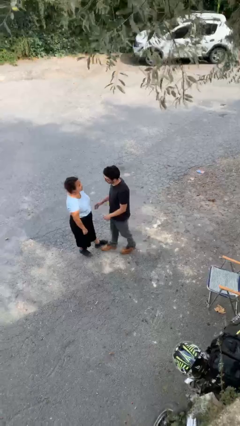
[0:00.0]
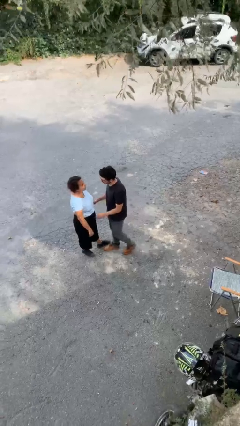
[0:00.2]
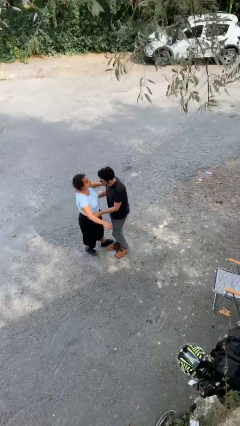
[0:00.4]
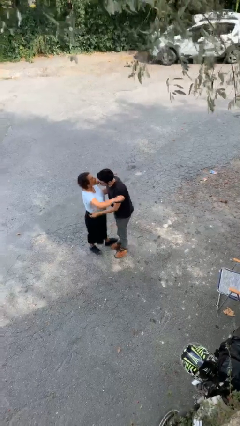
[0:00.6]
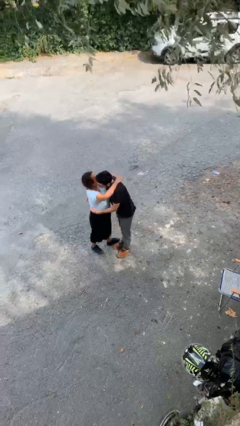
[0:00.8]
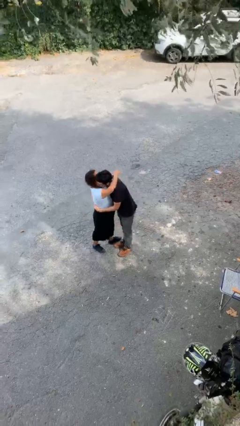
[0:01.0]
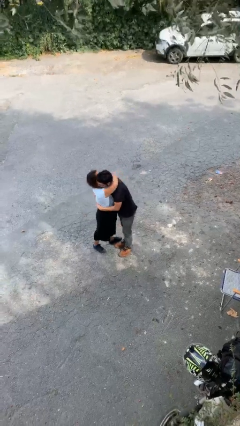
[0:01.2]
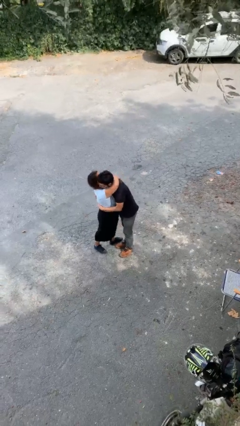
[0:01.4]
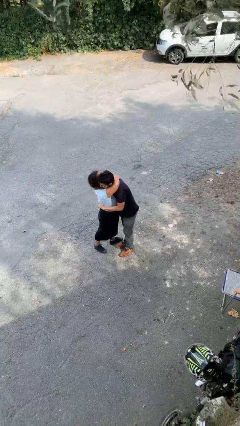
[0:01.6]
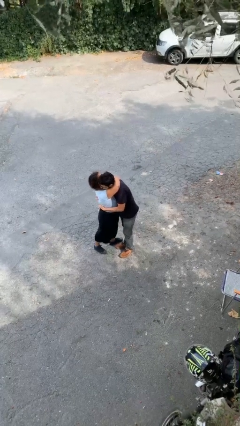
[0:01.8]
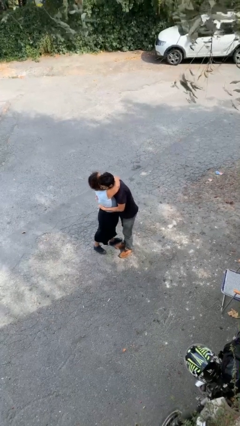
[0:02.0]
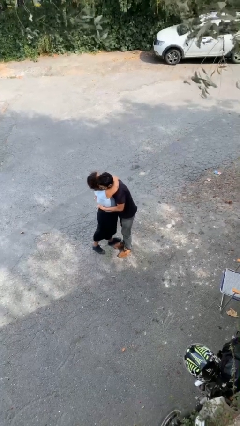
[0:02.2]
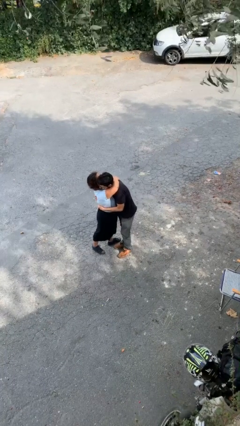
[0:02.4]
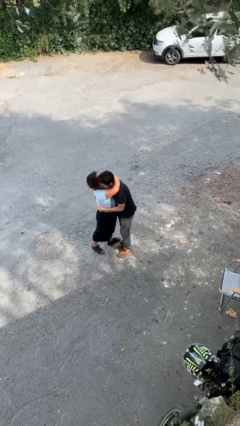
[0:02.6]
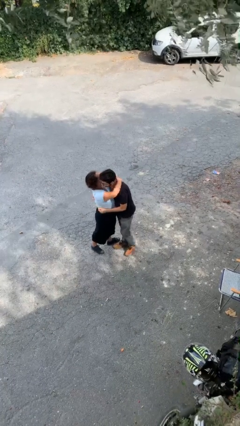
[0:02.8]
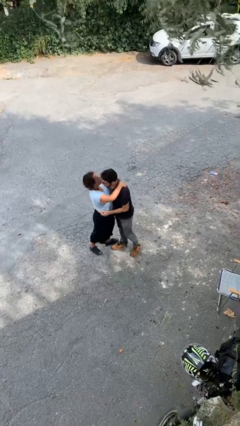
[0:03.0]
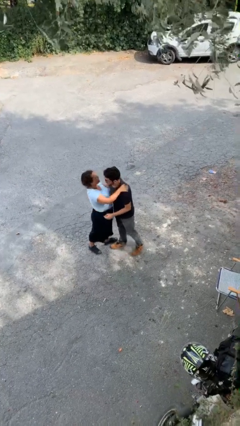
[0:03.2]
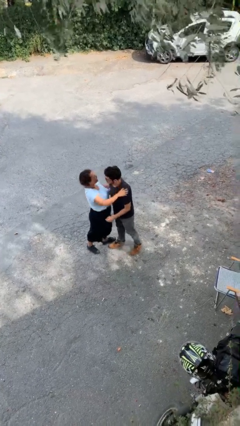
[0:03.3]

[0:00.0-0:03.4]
person embraces person

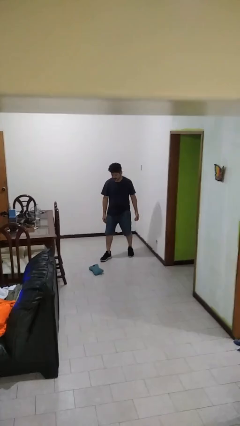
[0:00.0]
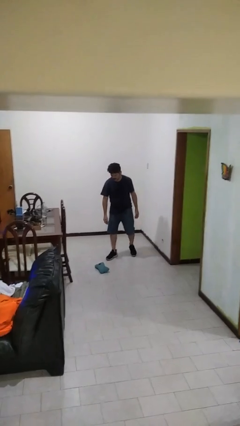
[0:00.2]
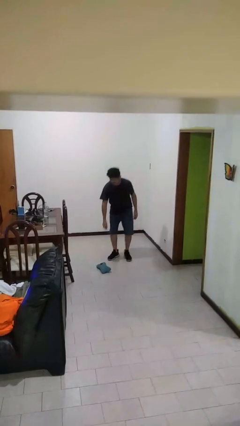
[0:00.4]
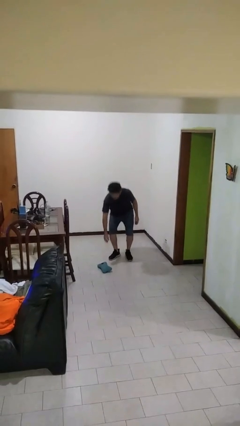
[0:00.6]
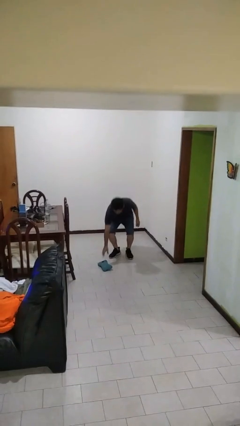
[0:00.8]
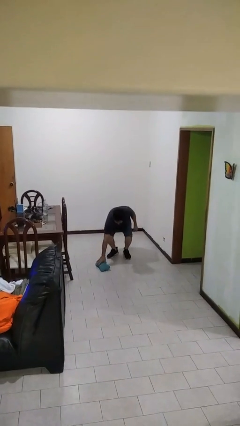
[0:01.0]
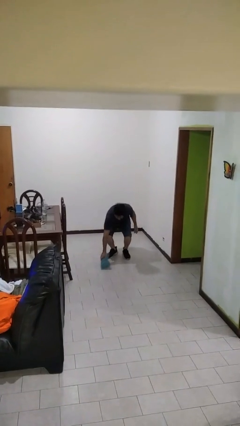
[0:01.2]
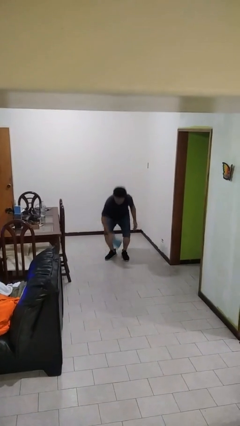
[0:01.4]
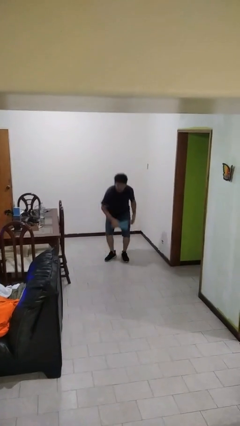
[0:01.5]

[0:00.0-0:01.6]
person picks up object from floor

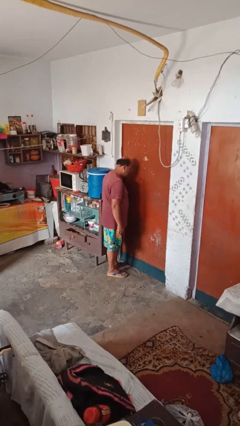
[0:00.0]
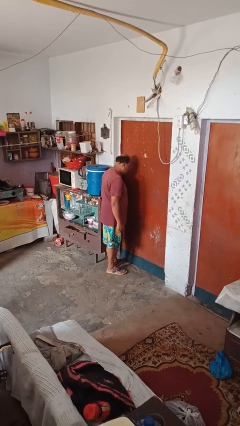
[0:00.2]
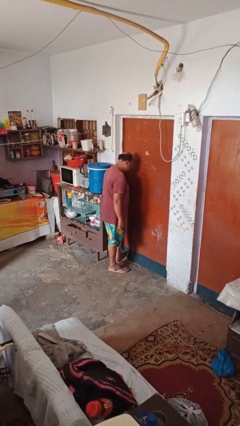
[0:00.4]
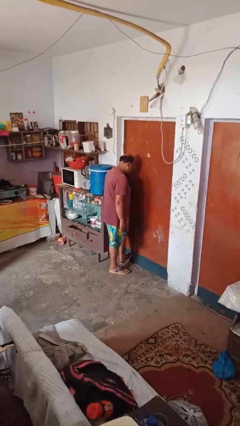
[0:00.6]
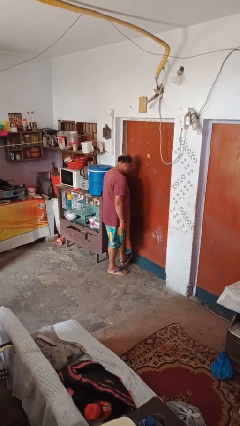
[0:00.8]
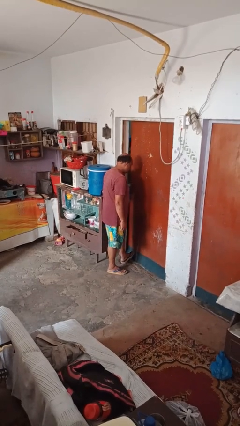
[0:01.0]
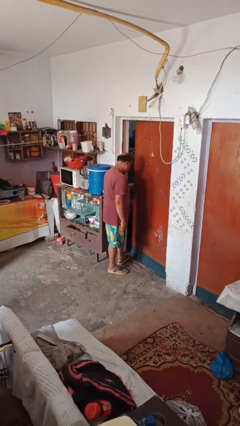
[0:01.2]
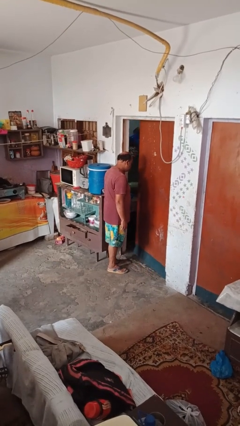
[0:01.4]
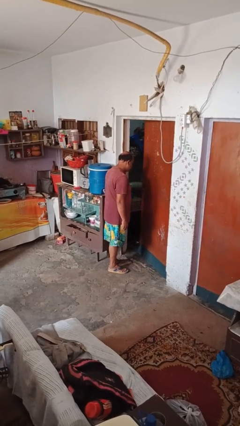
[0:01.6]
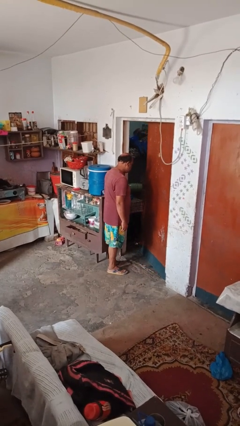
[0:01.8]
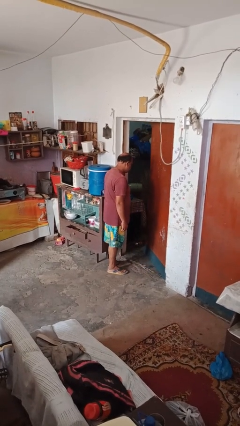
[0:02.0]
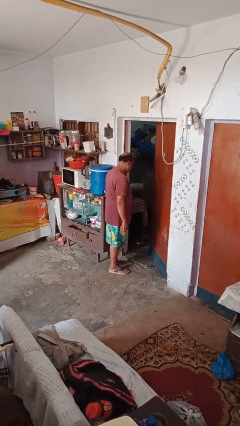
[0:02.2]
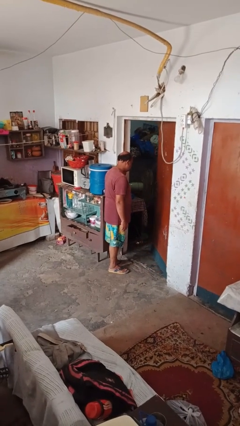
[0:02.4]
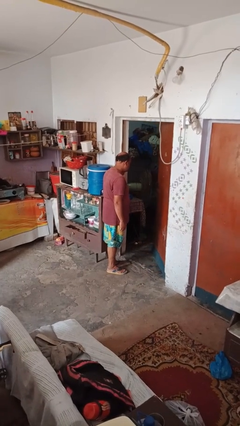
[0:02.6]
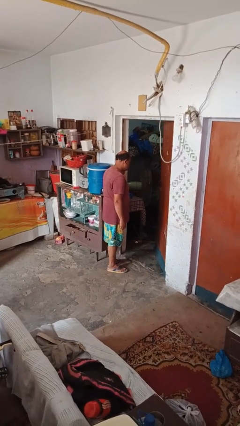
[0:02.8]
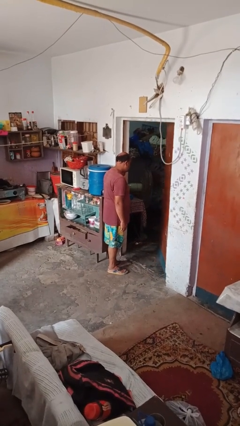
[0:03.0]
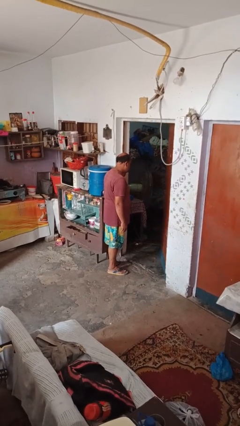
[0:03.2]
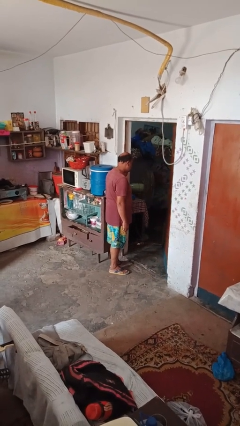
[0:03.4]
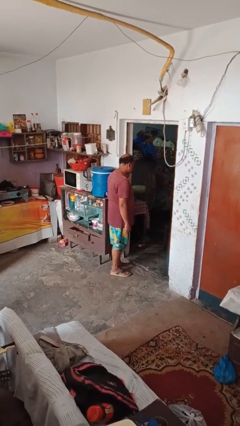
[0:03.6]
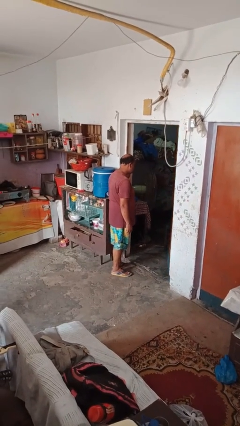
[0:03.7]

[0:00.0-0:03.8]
person opens facility door

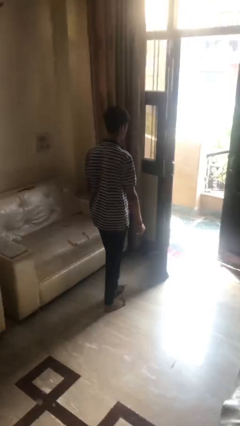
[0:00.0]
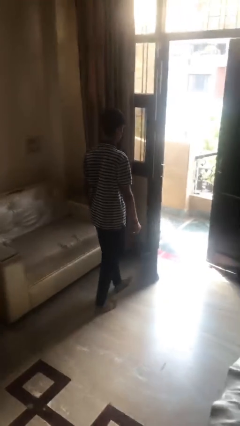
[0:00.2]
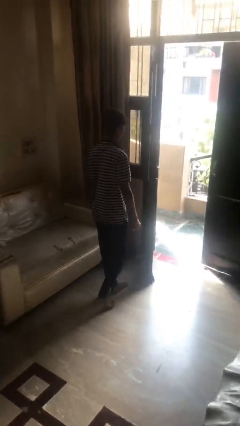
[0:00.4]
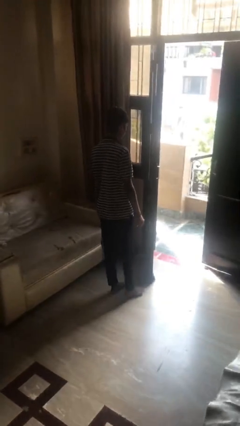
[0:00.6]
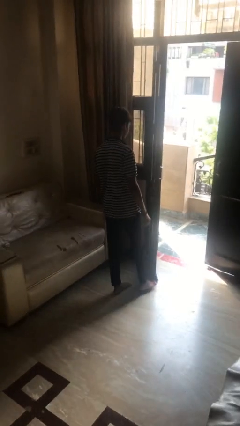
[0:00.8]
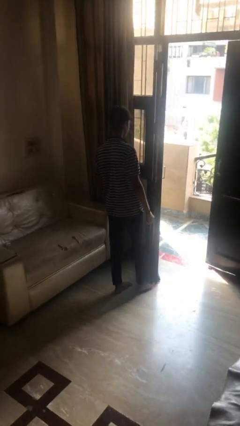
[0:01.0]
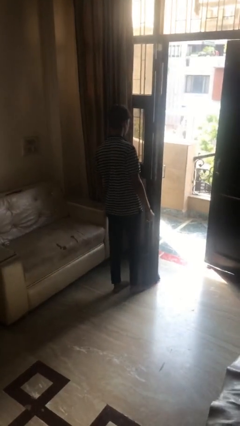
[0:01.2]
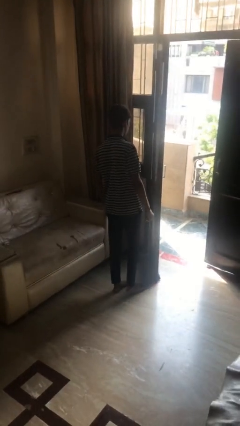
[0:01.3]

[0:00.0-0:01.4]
person stubs toe

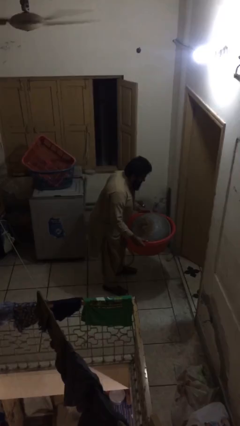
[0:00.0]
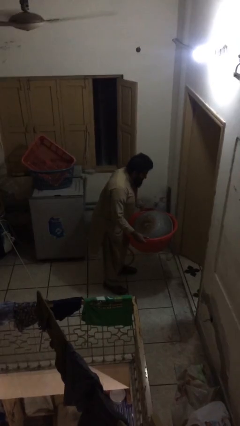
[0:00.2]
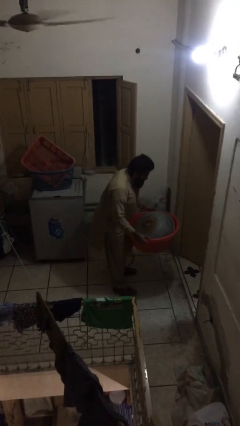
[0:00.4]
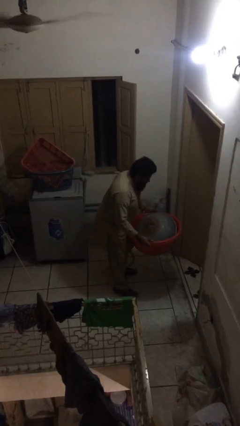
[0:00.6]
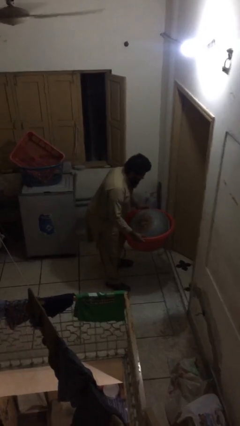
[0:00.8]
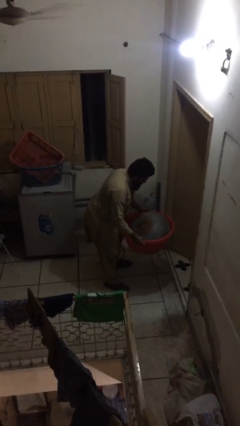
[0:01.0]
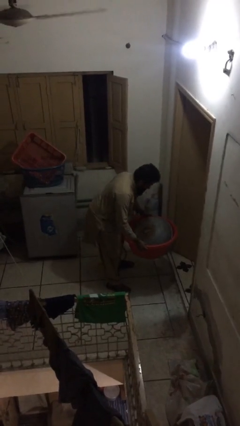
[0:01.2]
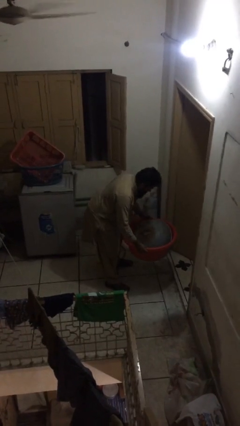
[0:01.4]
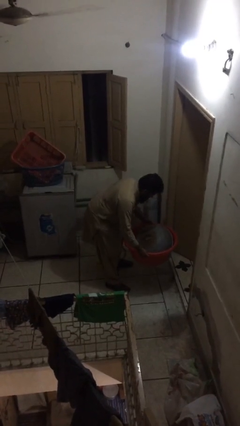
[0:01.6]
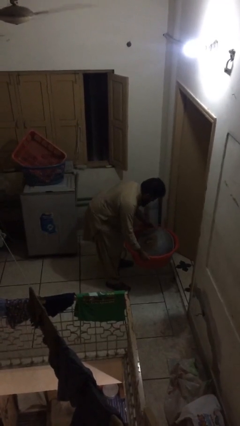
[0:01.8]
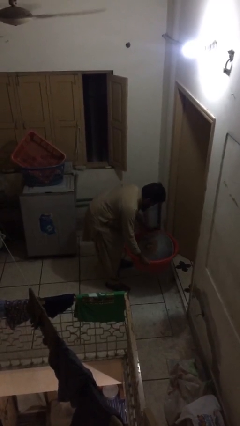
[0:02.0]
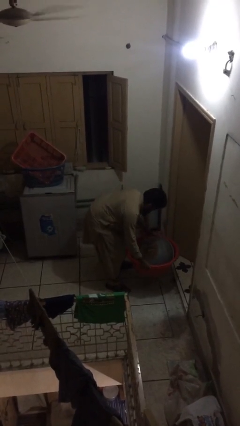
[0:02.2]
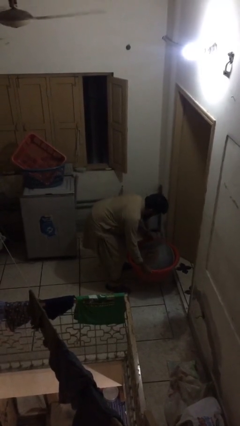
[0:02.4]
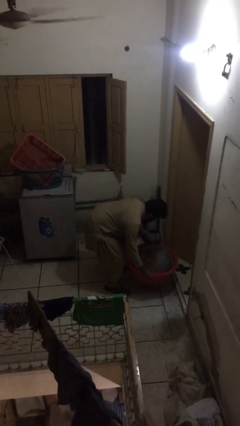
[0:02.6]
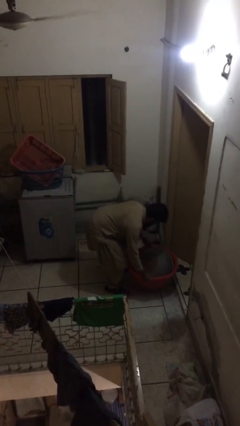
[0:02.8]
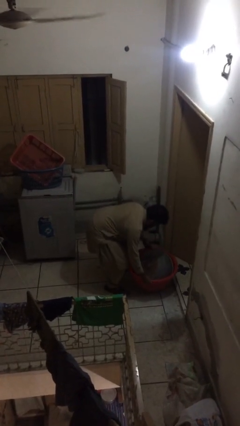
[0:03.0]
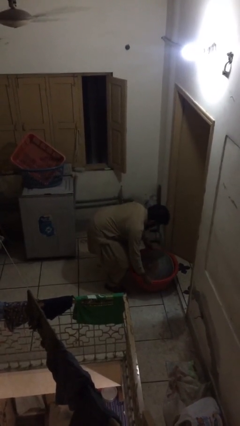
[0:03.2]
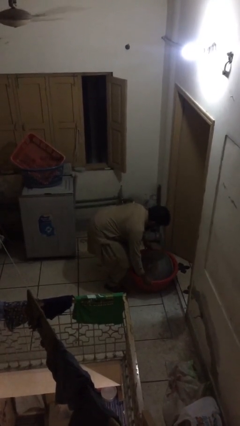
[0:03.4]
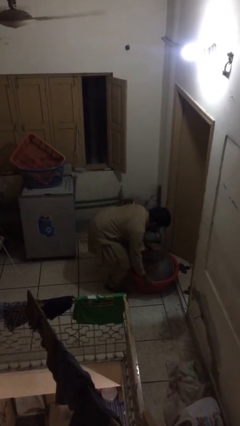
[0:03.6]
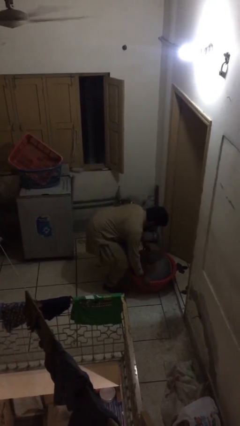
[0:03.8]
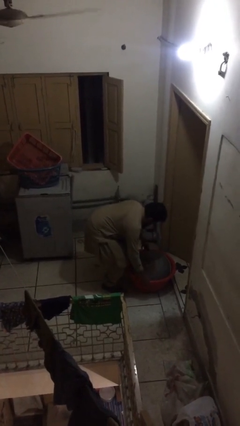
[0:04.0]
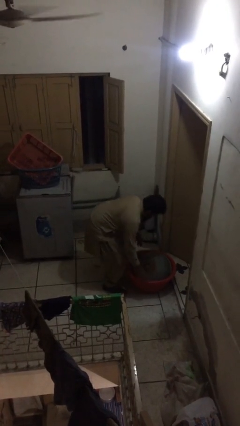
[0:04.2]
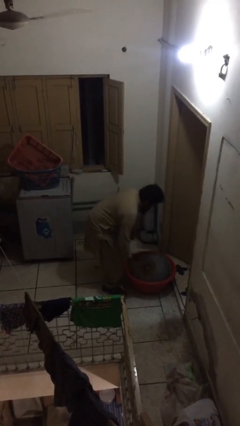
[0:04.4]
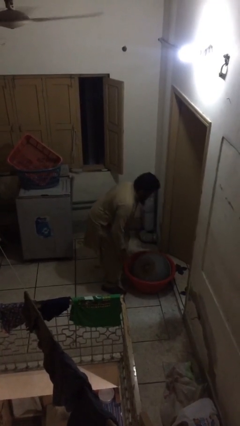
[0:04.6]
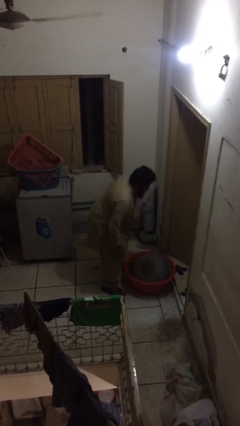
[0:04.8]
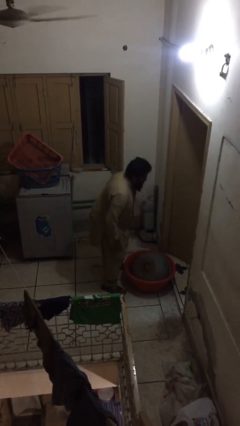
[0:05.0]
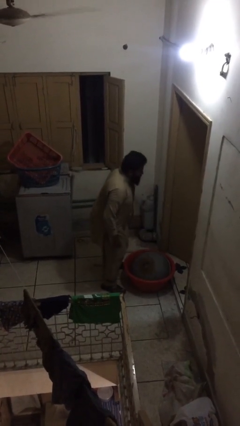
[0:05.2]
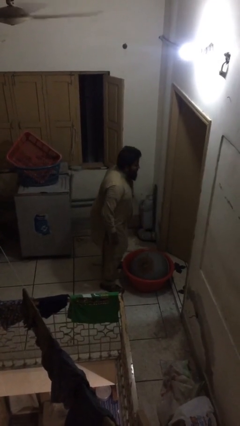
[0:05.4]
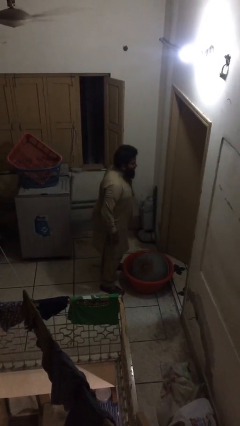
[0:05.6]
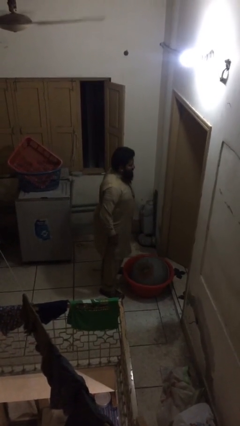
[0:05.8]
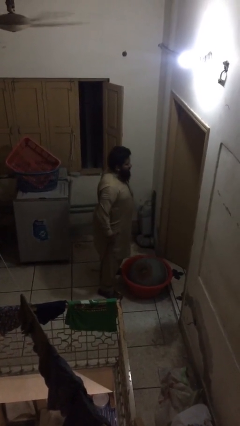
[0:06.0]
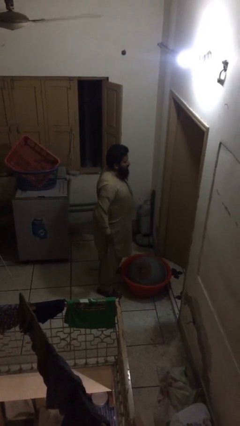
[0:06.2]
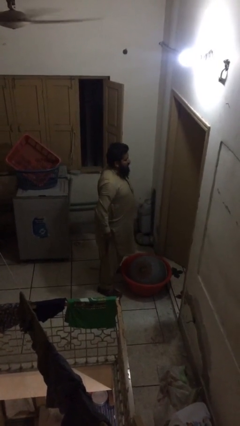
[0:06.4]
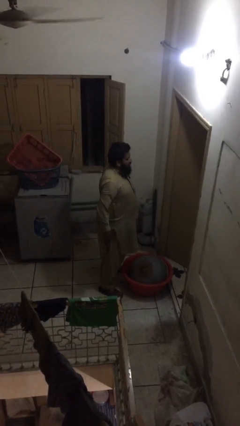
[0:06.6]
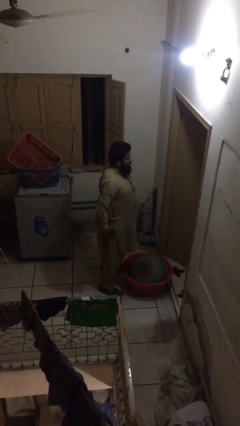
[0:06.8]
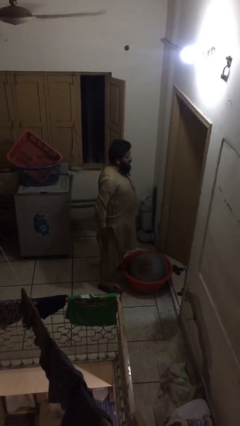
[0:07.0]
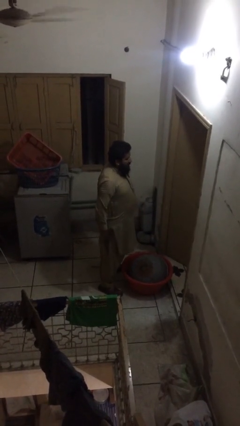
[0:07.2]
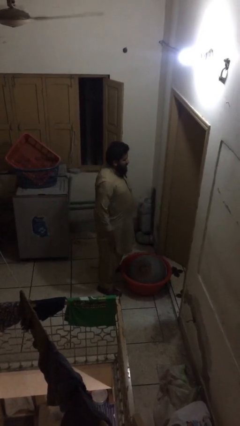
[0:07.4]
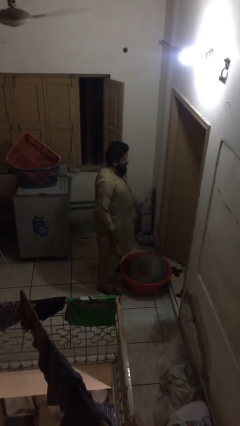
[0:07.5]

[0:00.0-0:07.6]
person puts down object on floor
